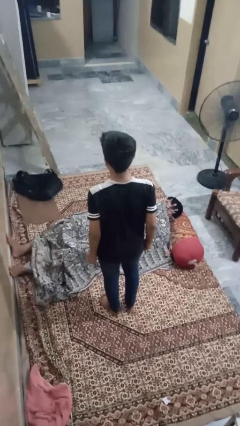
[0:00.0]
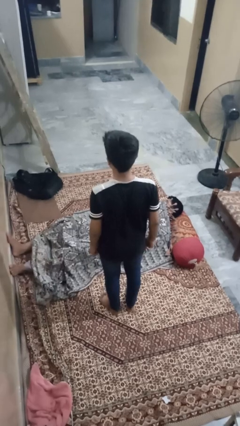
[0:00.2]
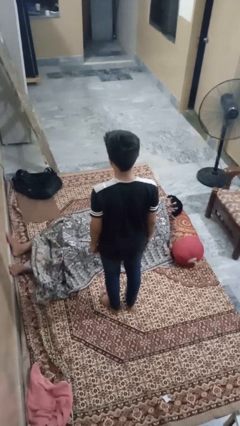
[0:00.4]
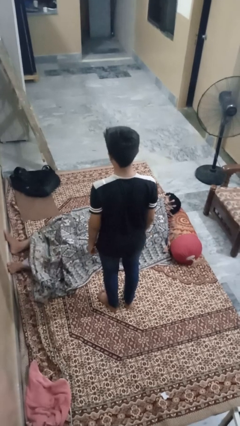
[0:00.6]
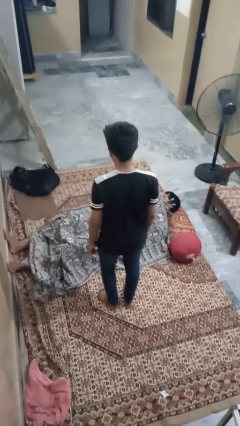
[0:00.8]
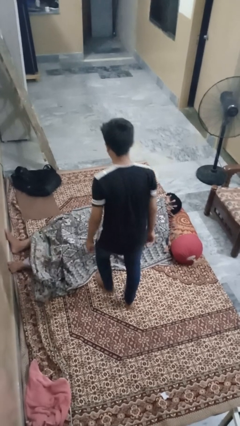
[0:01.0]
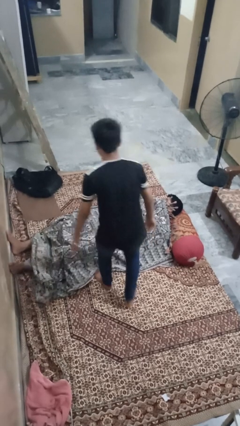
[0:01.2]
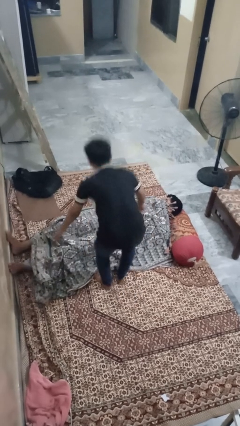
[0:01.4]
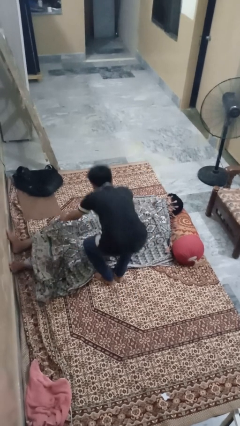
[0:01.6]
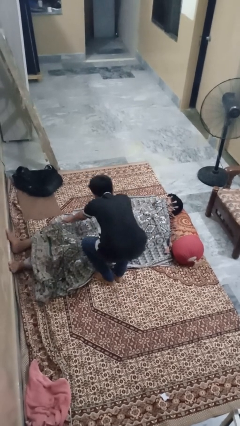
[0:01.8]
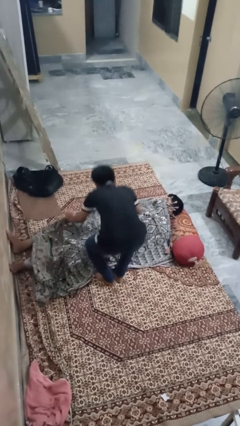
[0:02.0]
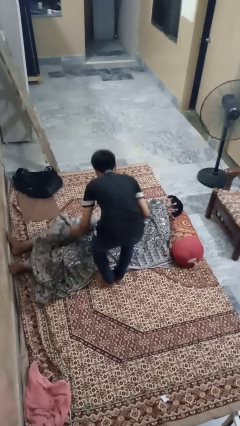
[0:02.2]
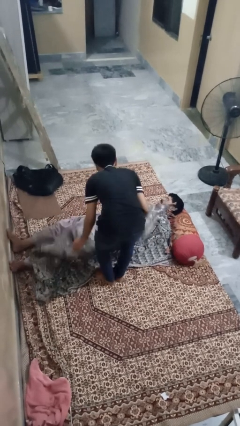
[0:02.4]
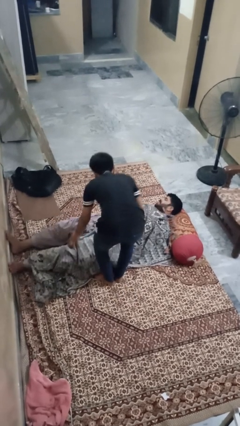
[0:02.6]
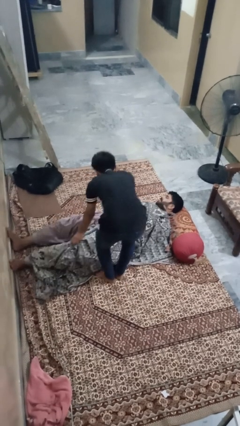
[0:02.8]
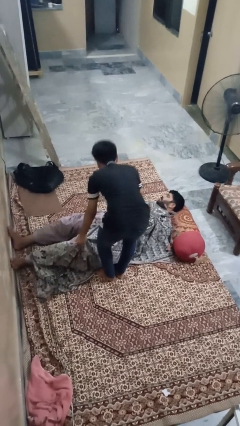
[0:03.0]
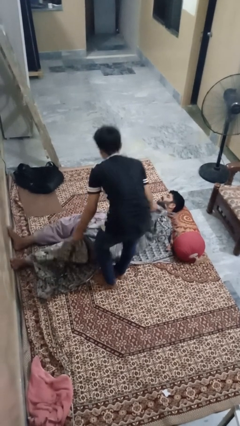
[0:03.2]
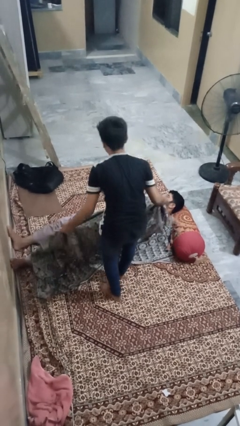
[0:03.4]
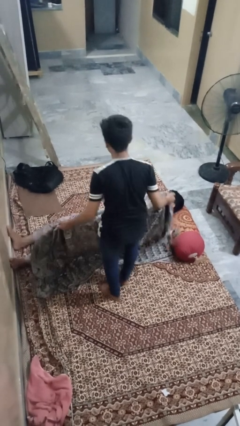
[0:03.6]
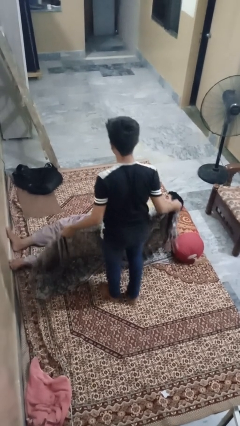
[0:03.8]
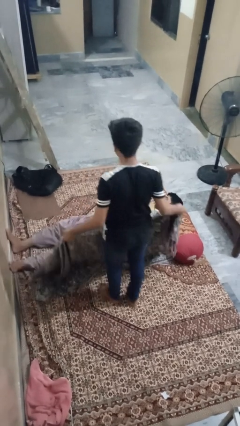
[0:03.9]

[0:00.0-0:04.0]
person uncovers friend with blanket

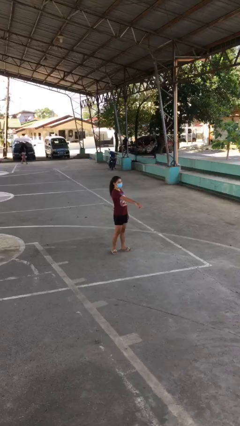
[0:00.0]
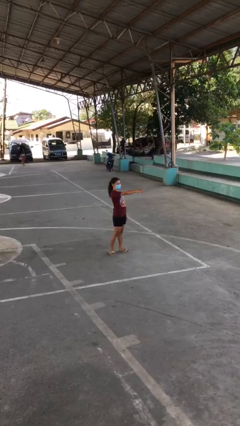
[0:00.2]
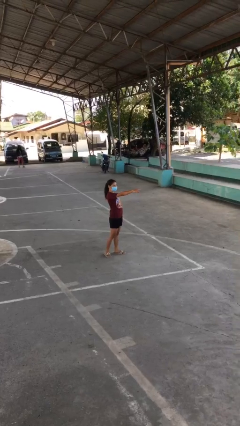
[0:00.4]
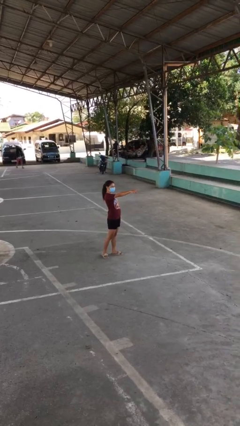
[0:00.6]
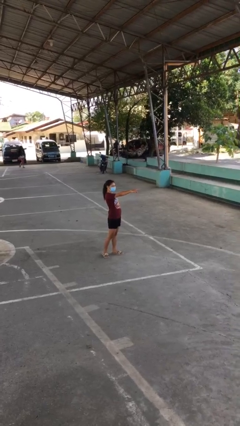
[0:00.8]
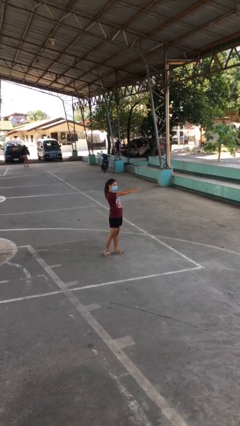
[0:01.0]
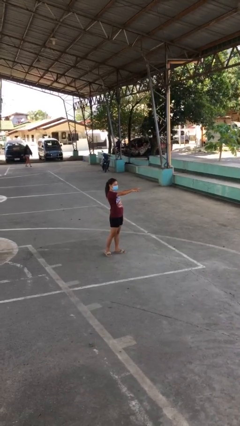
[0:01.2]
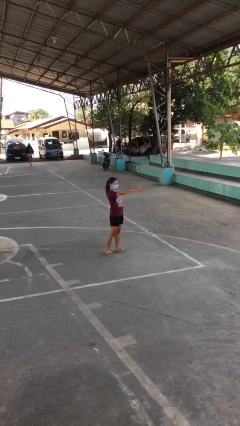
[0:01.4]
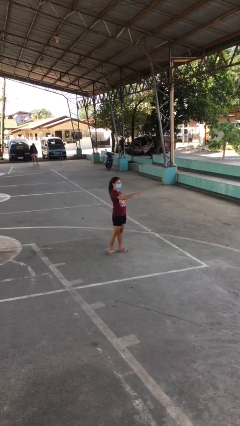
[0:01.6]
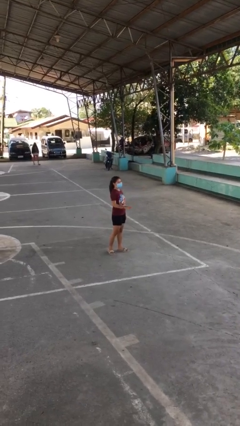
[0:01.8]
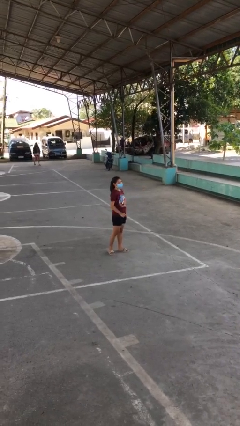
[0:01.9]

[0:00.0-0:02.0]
person points at person

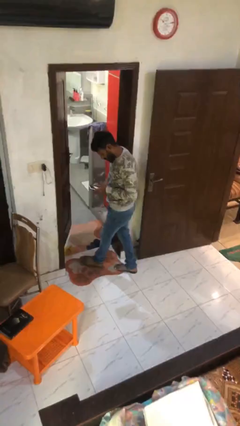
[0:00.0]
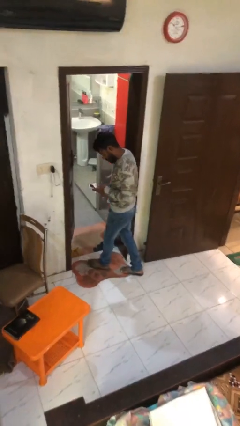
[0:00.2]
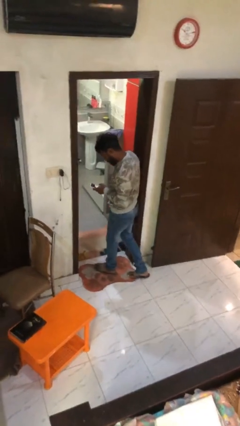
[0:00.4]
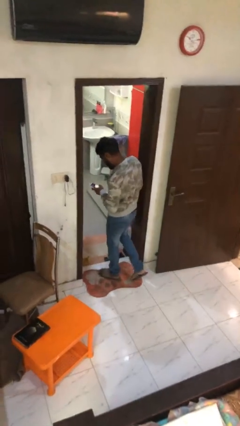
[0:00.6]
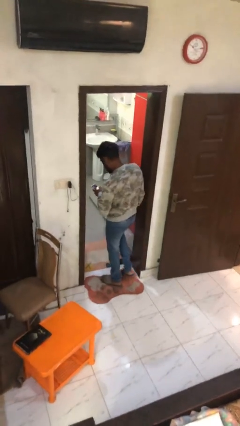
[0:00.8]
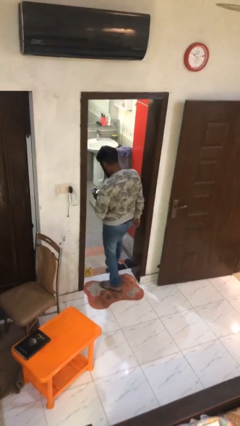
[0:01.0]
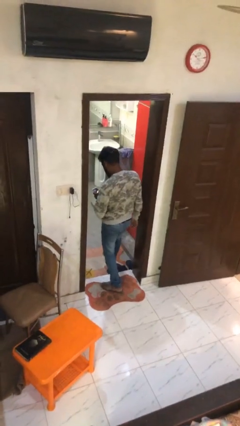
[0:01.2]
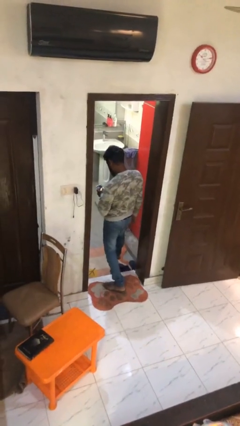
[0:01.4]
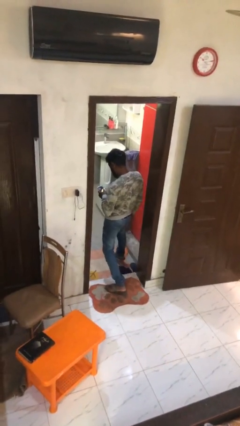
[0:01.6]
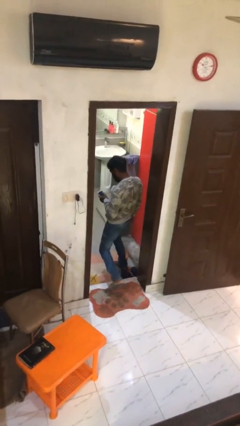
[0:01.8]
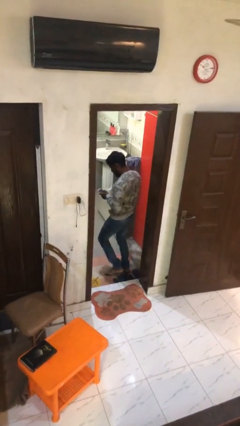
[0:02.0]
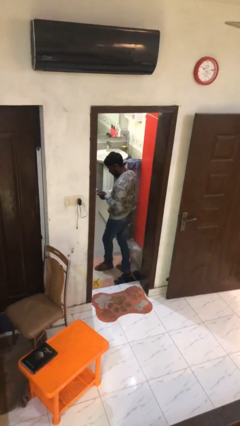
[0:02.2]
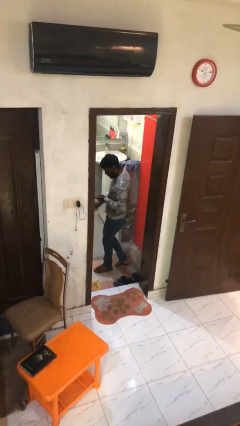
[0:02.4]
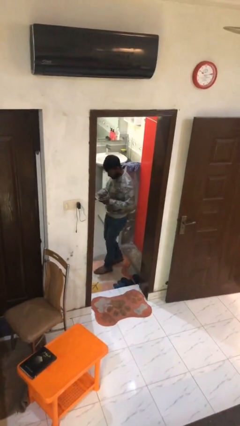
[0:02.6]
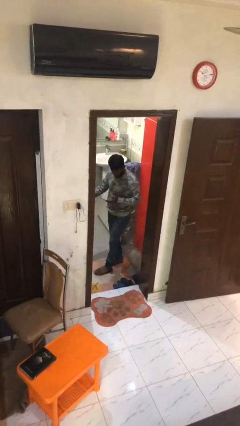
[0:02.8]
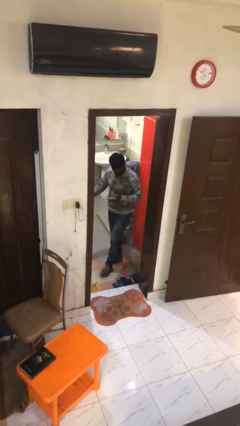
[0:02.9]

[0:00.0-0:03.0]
person exits scene through structure

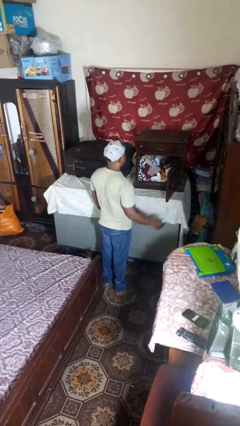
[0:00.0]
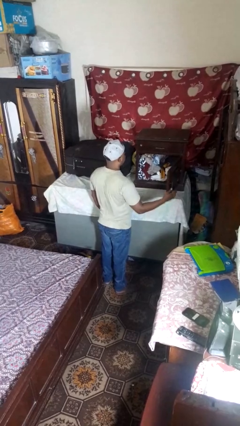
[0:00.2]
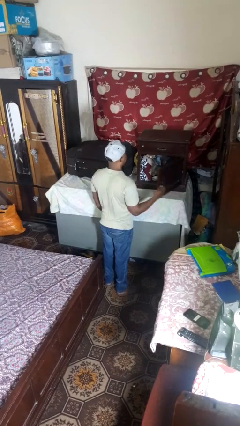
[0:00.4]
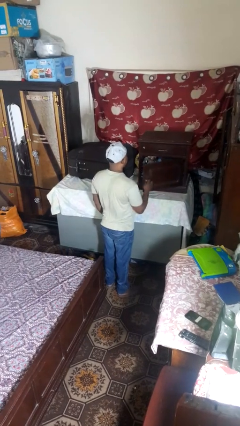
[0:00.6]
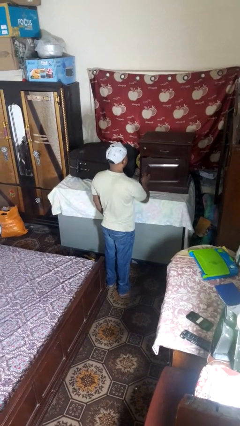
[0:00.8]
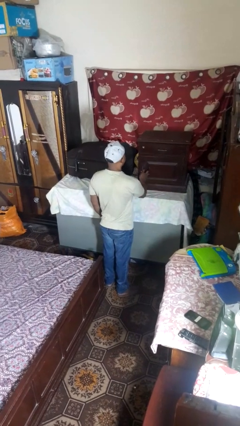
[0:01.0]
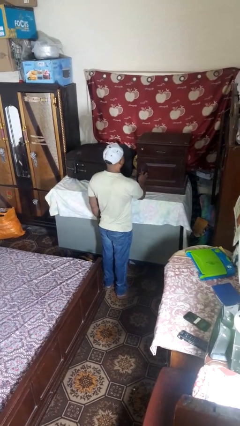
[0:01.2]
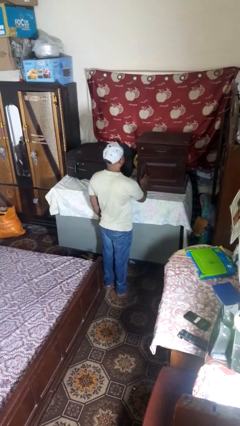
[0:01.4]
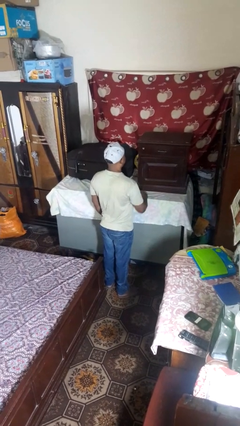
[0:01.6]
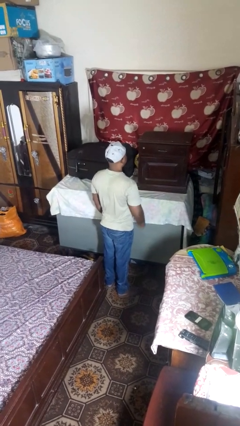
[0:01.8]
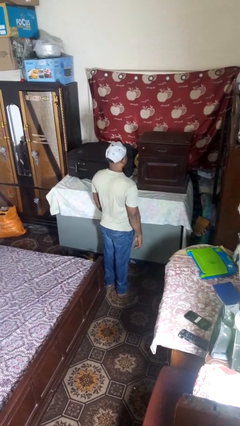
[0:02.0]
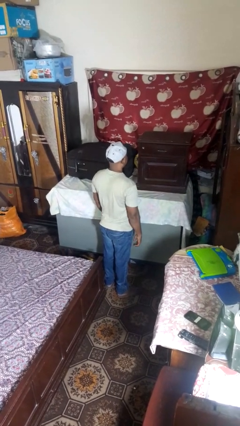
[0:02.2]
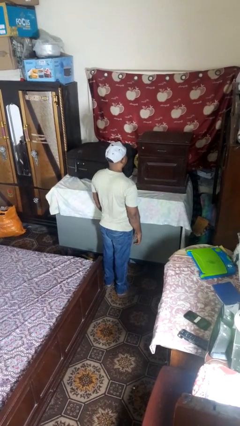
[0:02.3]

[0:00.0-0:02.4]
person closes closet door

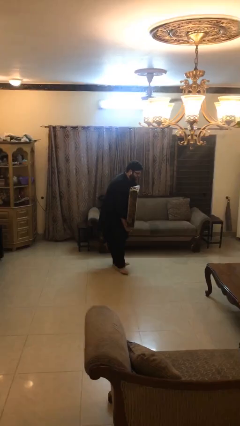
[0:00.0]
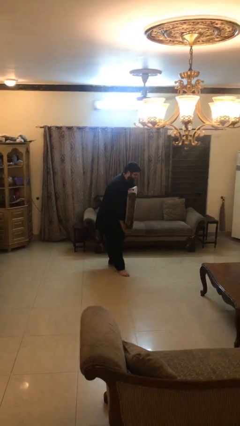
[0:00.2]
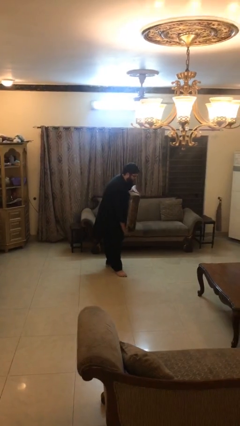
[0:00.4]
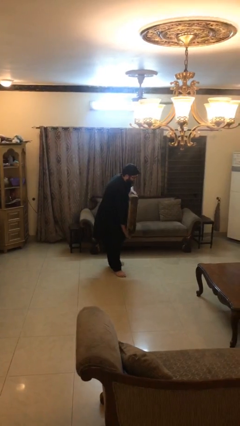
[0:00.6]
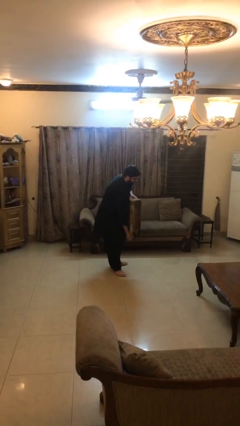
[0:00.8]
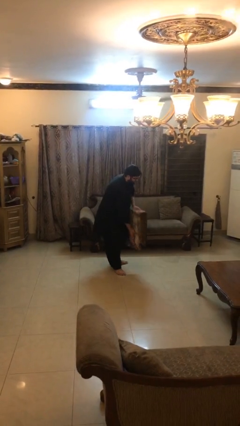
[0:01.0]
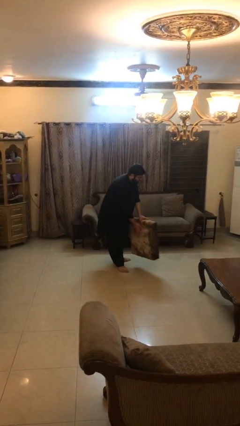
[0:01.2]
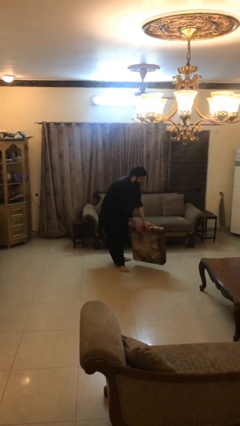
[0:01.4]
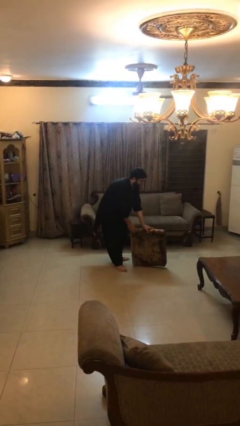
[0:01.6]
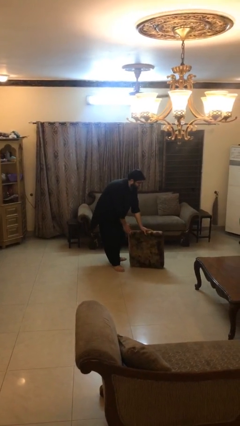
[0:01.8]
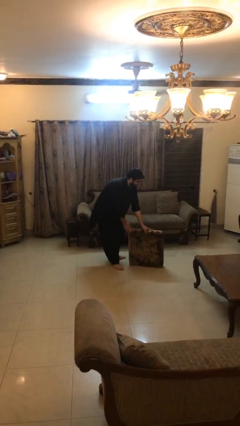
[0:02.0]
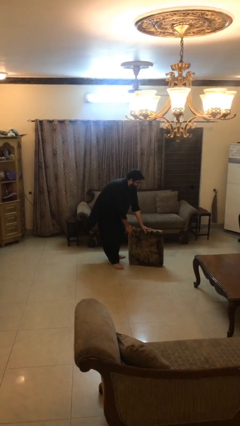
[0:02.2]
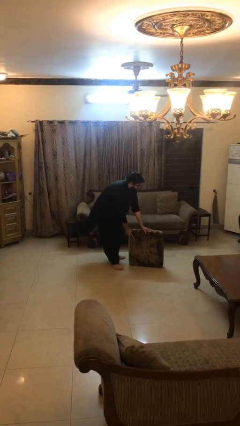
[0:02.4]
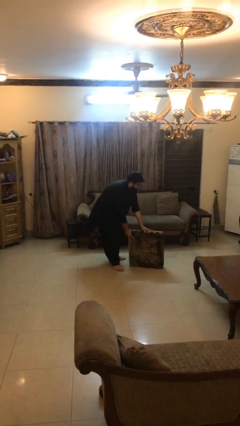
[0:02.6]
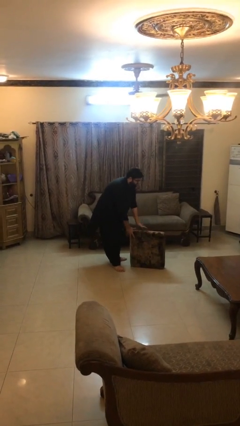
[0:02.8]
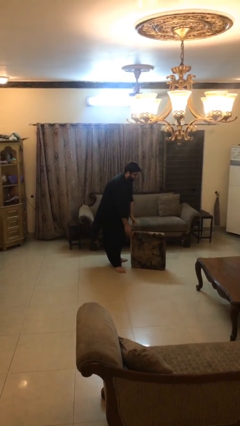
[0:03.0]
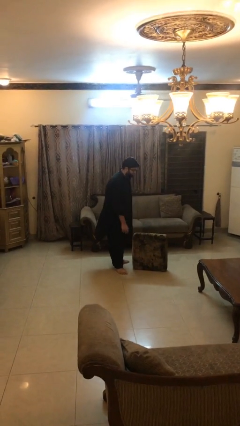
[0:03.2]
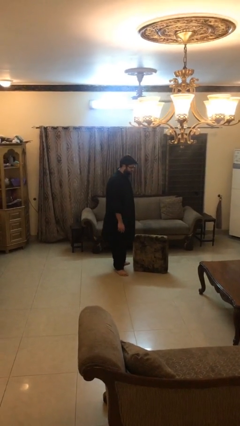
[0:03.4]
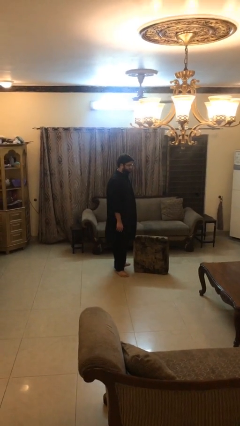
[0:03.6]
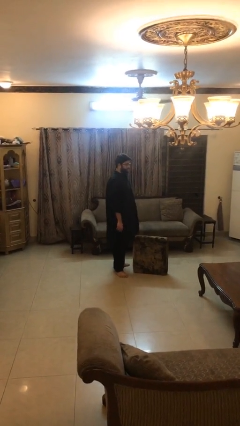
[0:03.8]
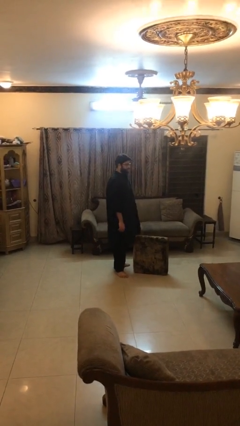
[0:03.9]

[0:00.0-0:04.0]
person puts down object on floor

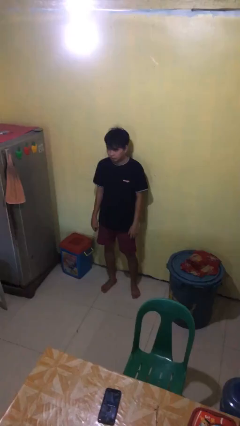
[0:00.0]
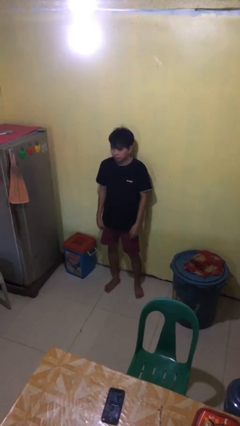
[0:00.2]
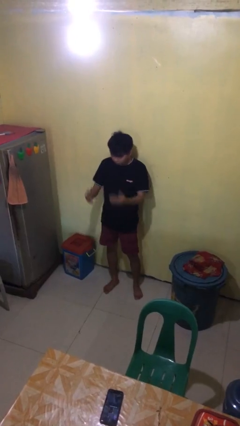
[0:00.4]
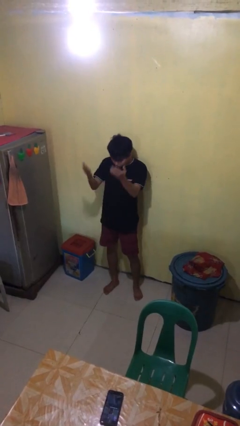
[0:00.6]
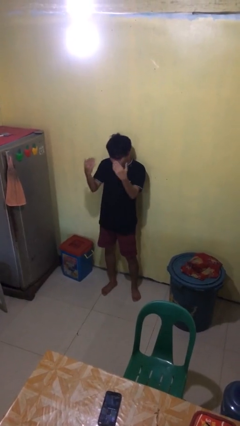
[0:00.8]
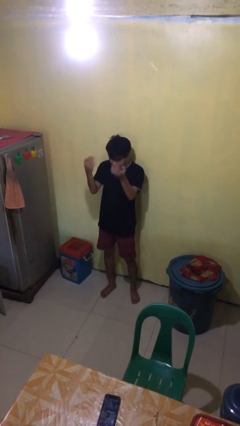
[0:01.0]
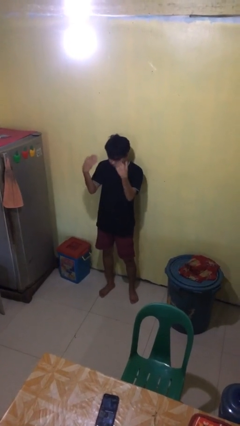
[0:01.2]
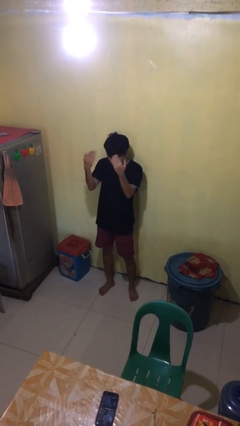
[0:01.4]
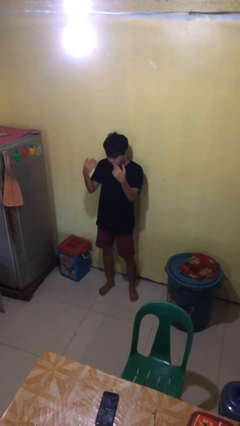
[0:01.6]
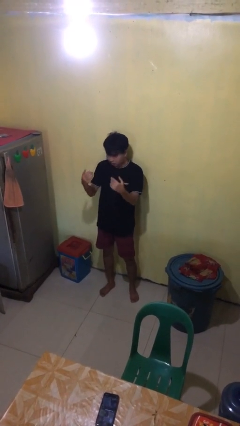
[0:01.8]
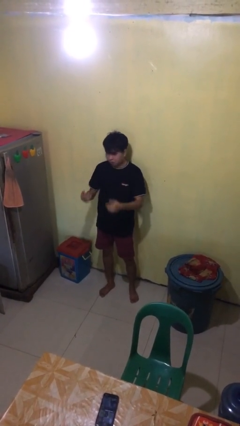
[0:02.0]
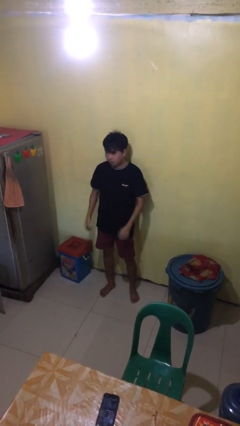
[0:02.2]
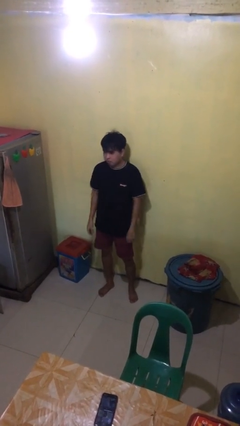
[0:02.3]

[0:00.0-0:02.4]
person gestures come here
